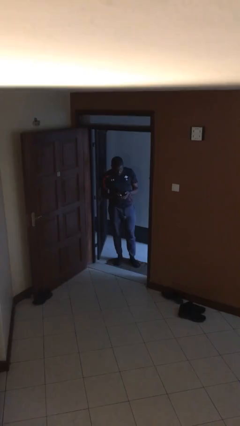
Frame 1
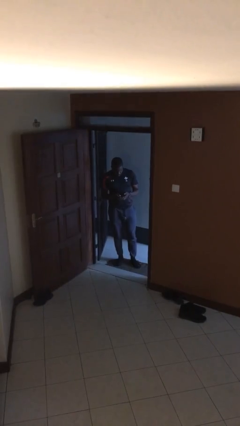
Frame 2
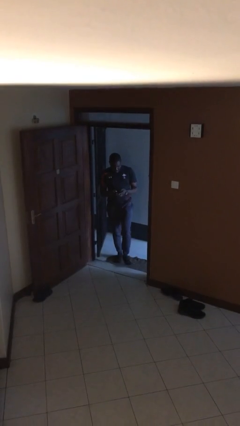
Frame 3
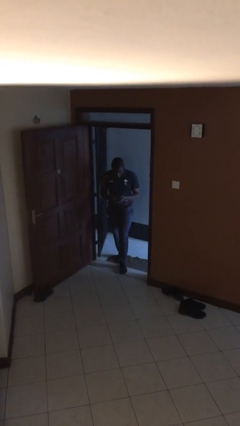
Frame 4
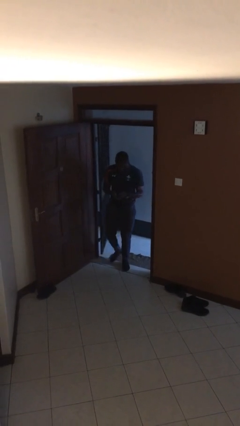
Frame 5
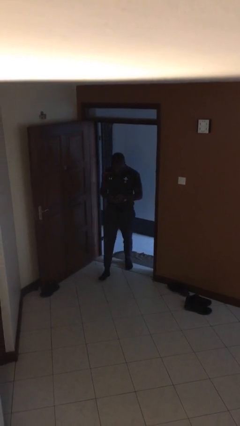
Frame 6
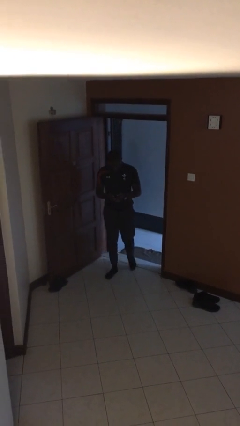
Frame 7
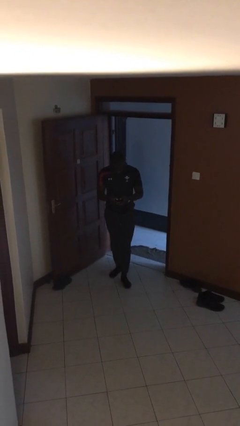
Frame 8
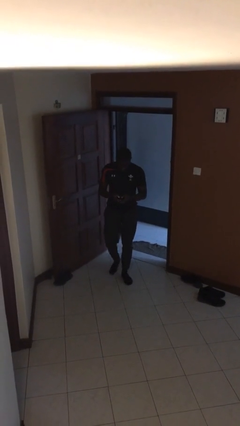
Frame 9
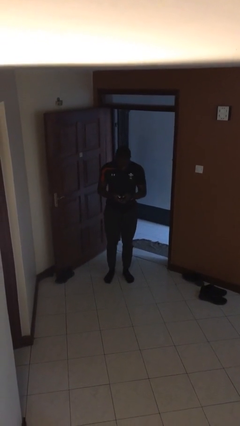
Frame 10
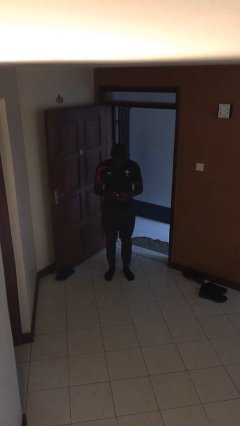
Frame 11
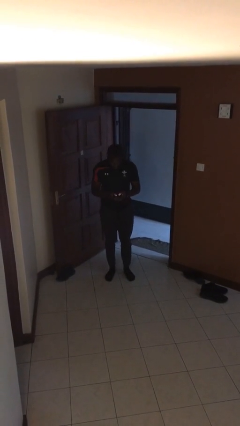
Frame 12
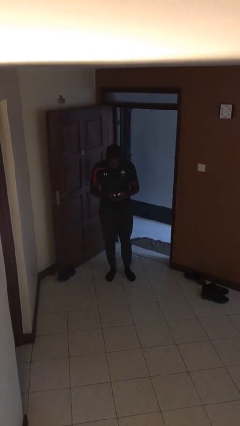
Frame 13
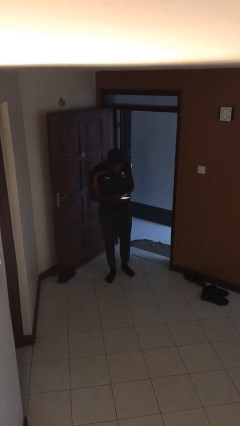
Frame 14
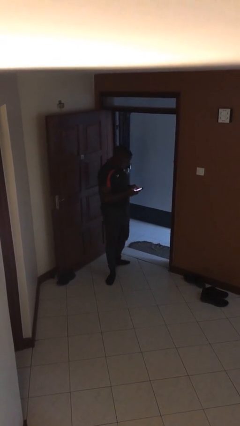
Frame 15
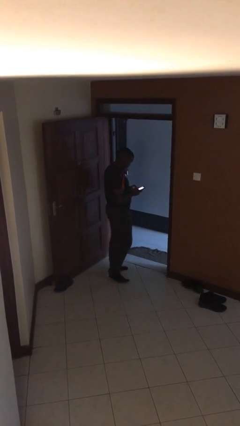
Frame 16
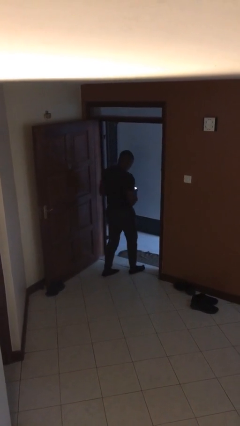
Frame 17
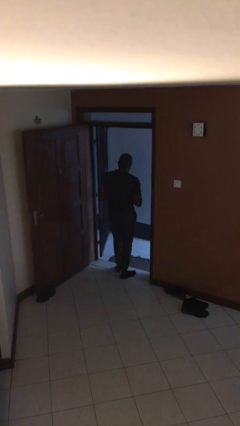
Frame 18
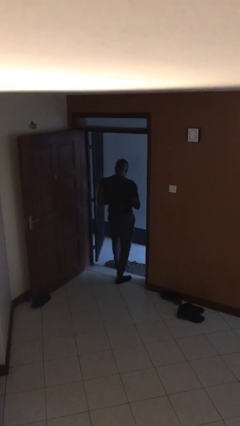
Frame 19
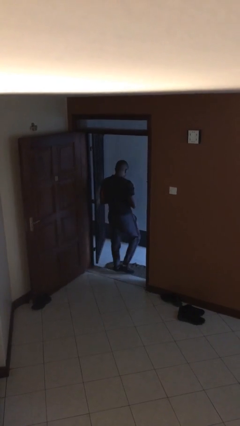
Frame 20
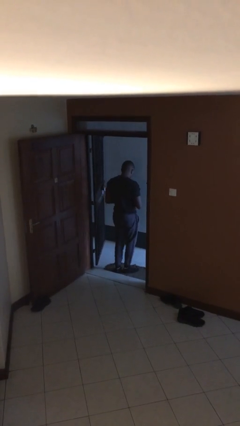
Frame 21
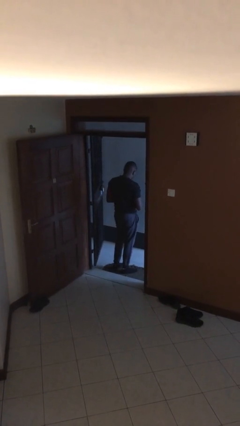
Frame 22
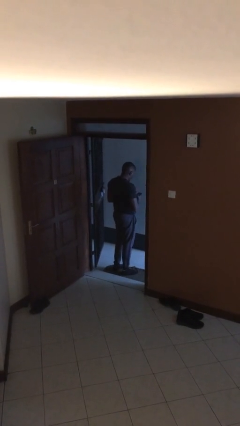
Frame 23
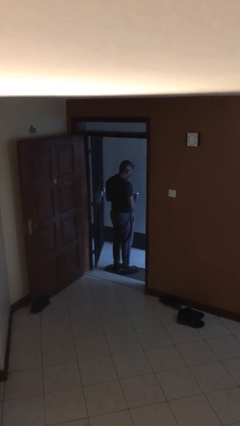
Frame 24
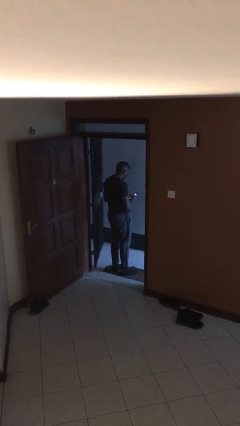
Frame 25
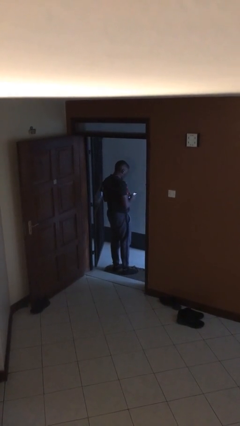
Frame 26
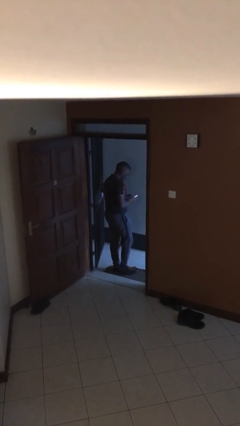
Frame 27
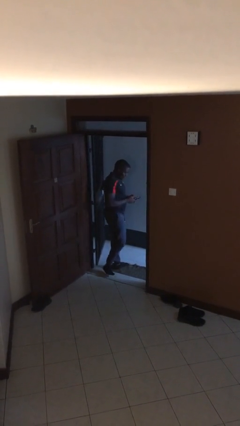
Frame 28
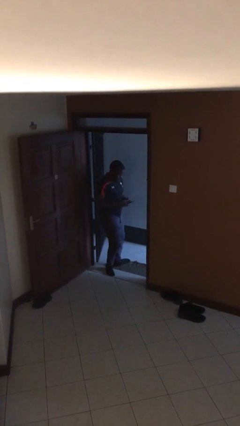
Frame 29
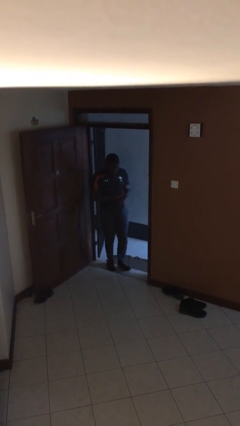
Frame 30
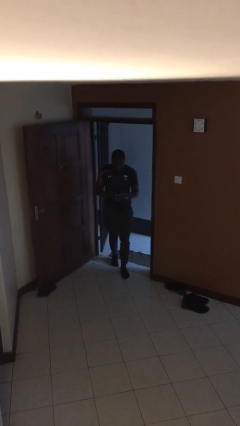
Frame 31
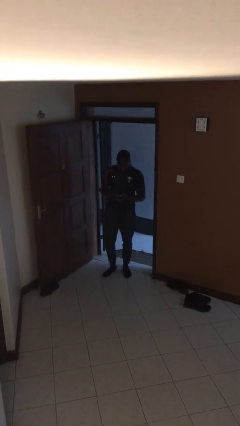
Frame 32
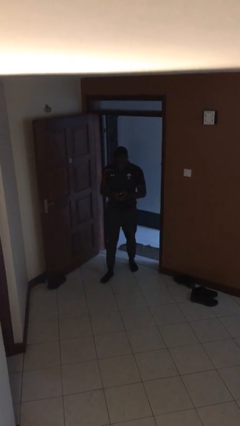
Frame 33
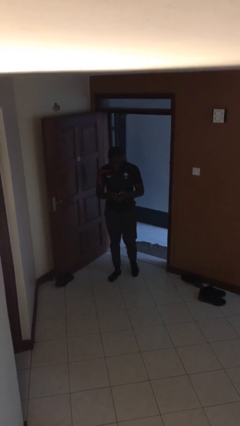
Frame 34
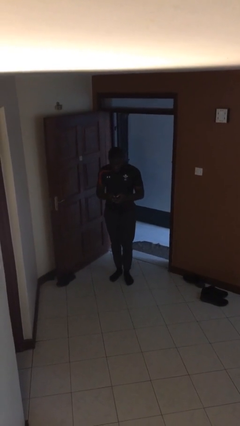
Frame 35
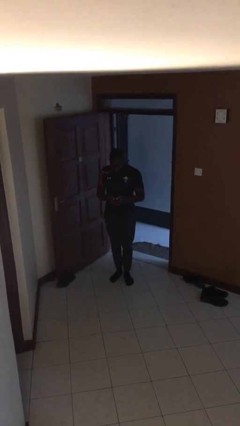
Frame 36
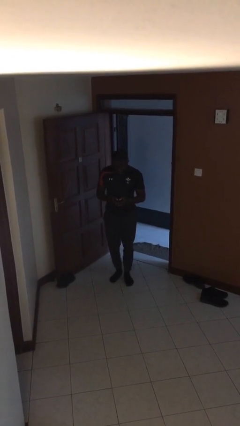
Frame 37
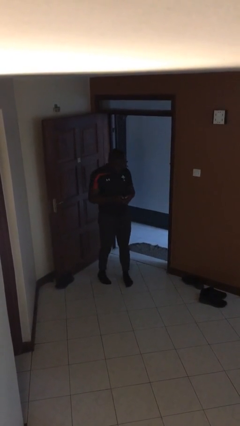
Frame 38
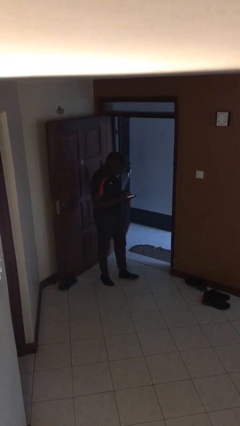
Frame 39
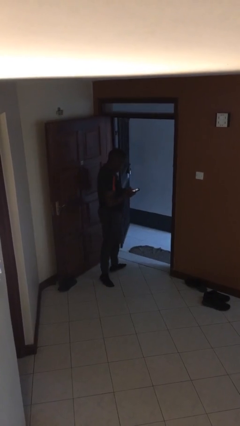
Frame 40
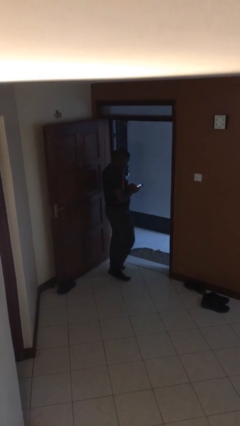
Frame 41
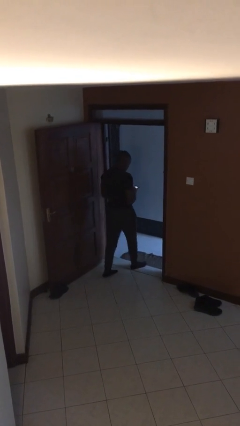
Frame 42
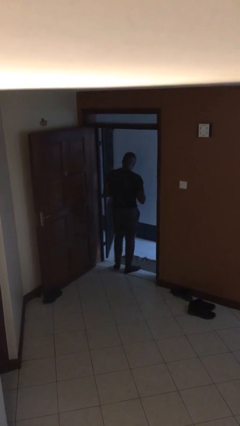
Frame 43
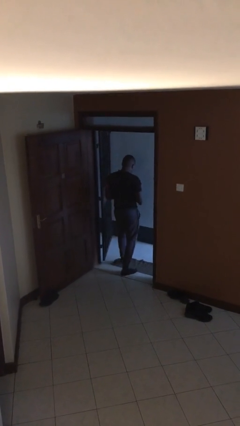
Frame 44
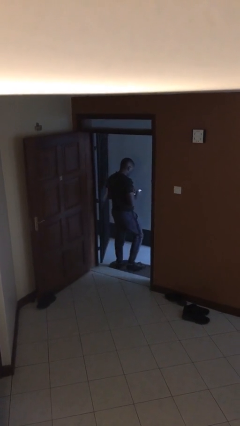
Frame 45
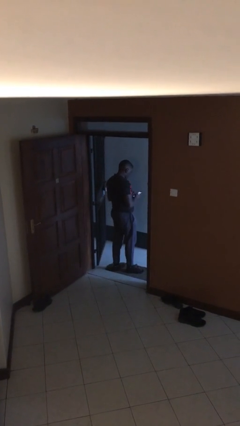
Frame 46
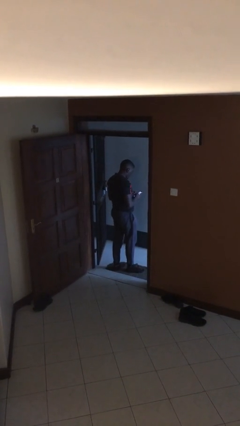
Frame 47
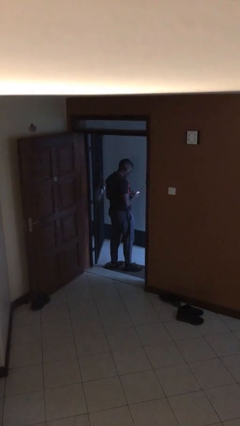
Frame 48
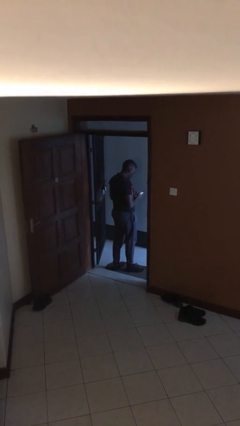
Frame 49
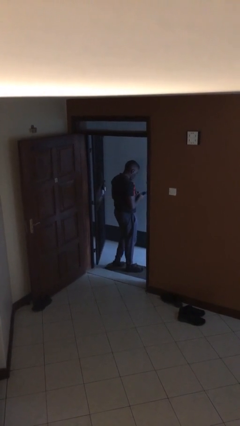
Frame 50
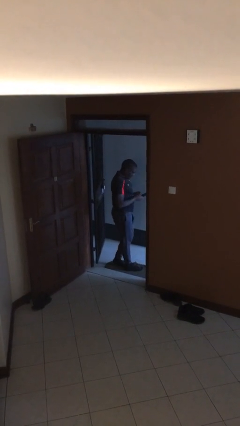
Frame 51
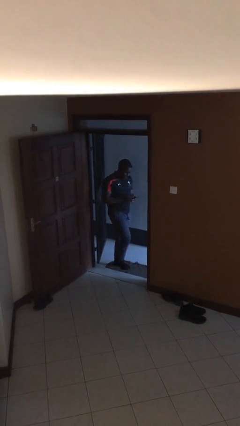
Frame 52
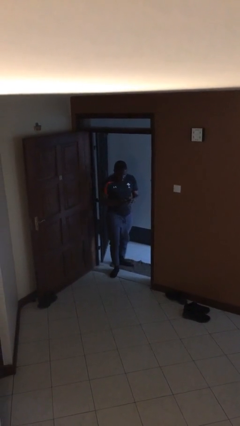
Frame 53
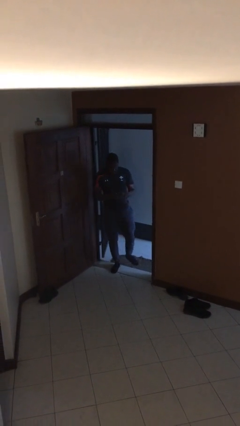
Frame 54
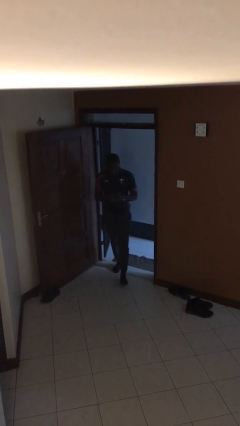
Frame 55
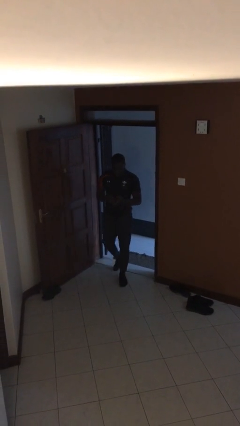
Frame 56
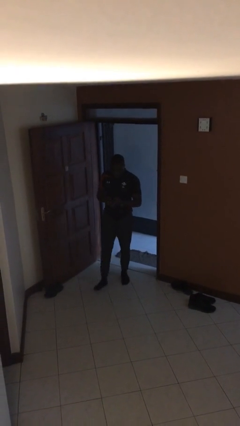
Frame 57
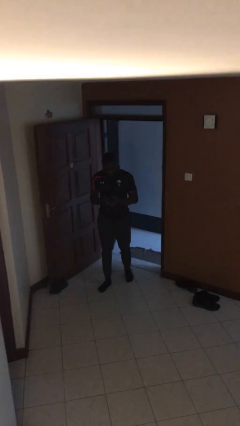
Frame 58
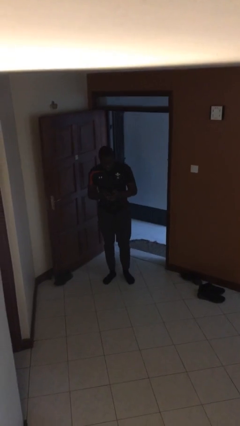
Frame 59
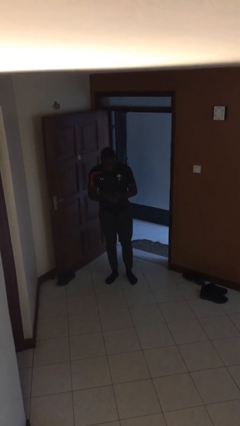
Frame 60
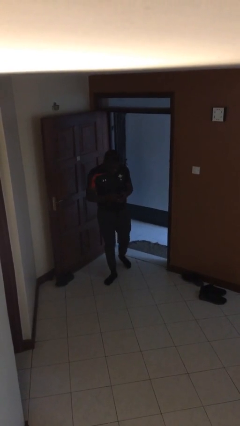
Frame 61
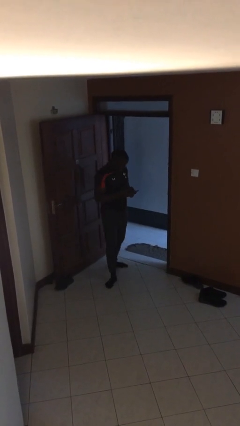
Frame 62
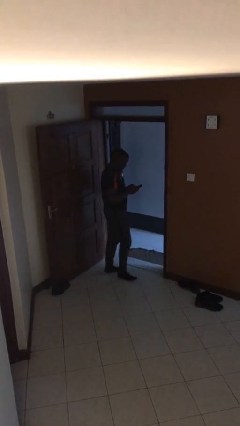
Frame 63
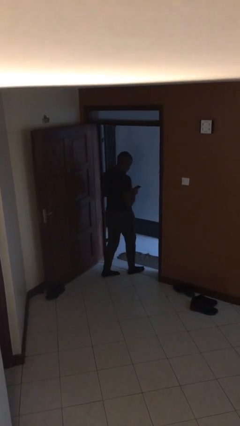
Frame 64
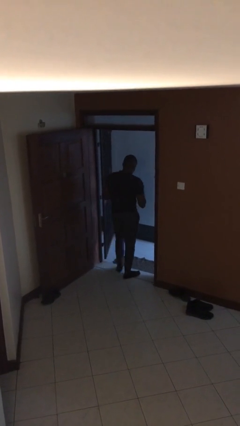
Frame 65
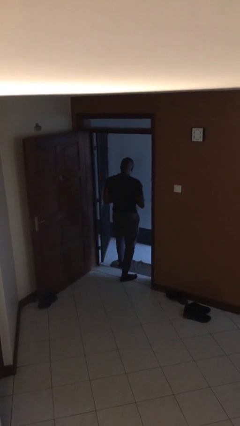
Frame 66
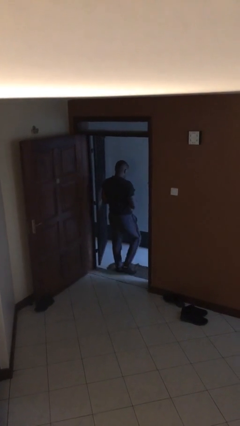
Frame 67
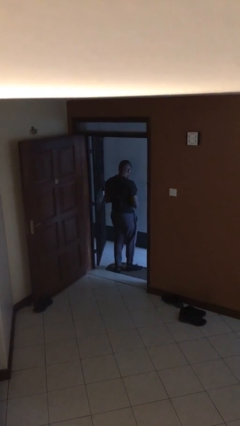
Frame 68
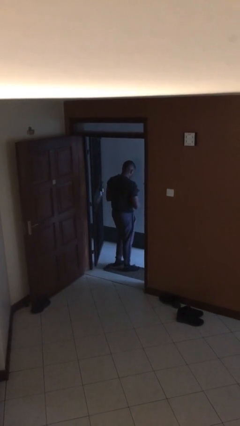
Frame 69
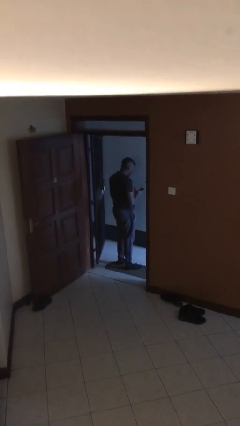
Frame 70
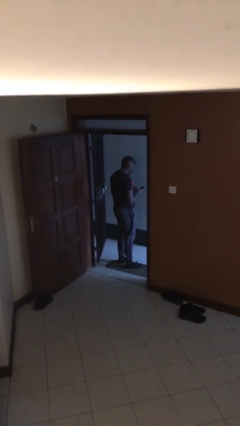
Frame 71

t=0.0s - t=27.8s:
person texts on phone

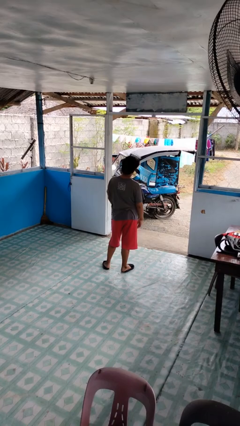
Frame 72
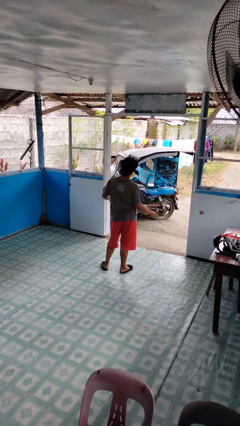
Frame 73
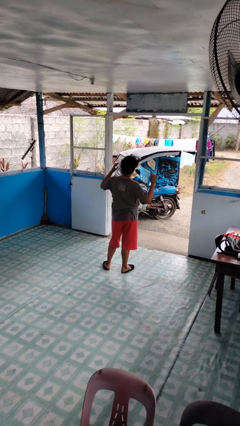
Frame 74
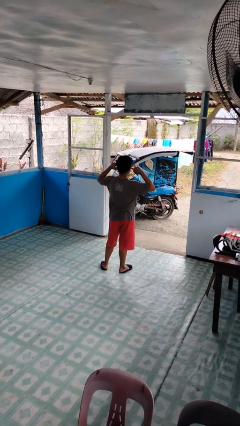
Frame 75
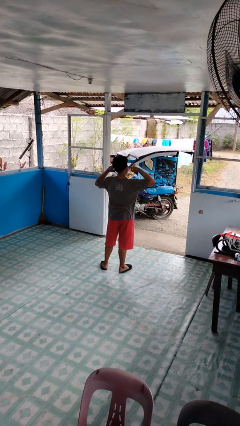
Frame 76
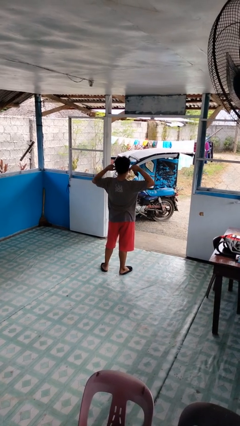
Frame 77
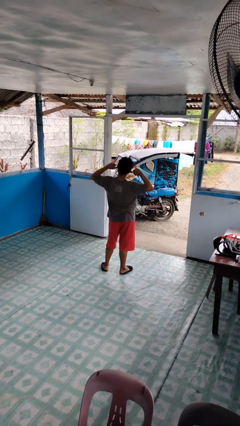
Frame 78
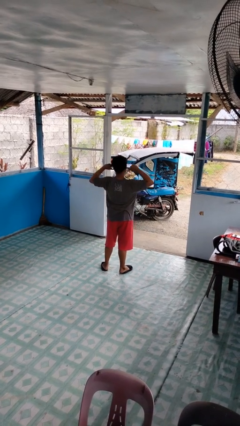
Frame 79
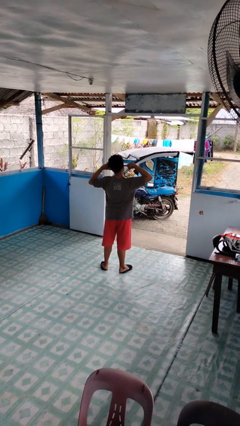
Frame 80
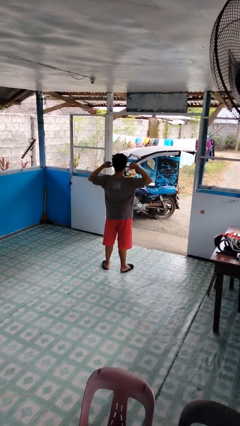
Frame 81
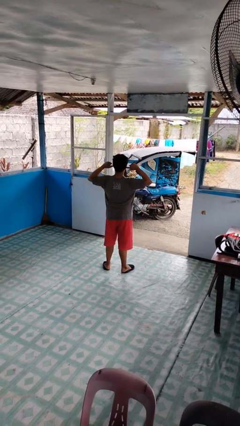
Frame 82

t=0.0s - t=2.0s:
person puts fingers in ear

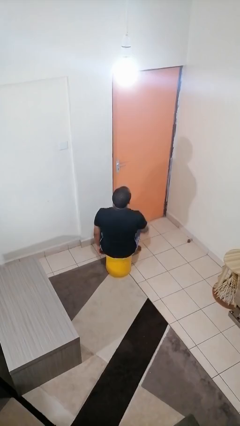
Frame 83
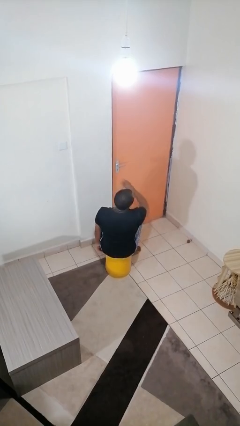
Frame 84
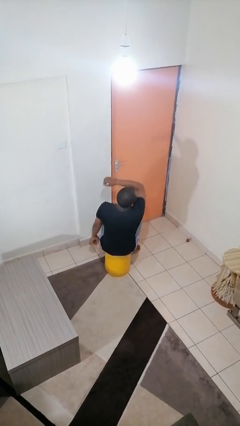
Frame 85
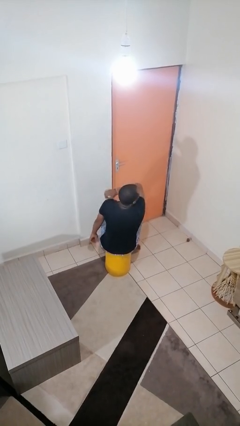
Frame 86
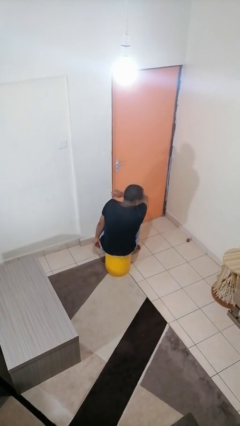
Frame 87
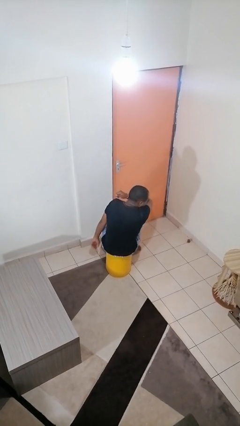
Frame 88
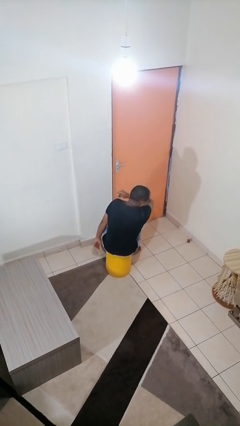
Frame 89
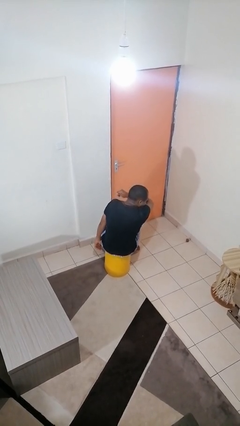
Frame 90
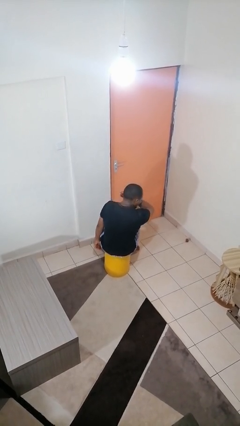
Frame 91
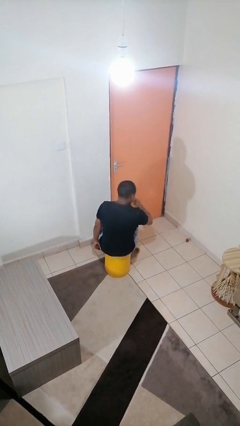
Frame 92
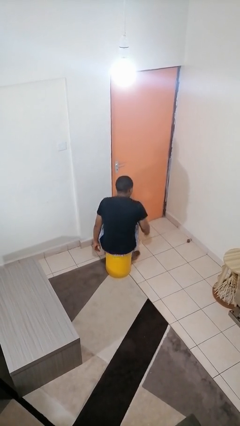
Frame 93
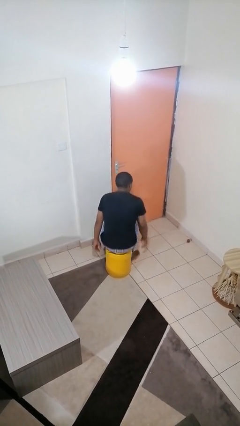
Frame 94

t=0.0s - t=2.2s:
person sneezes into arm
